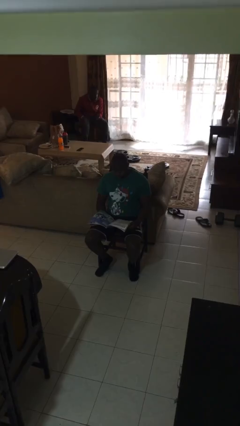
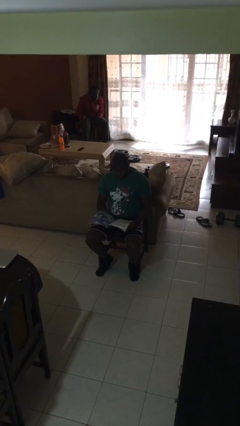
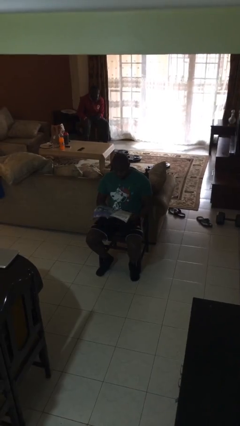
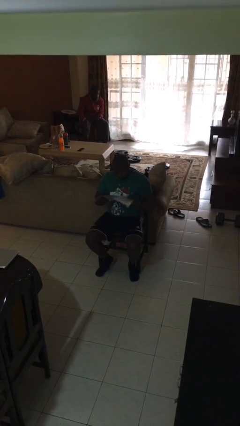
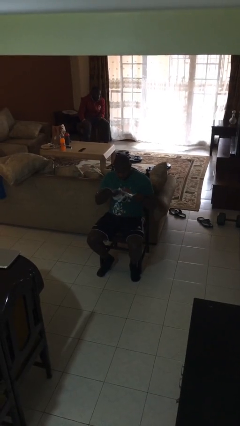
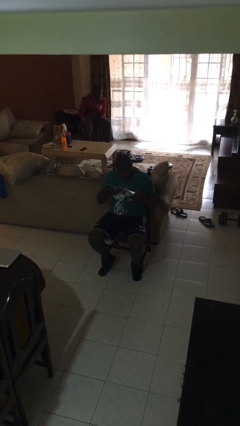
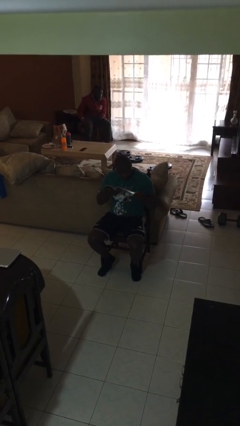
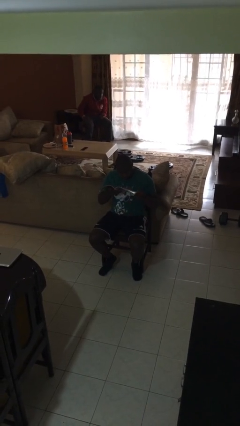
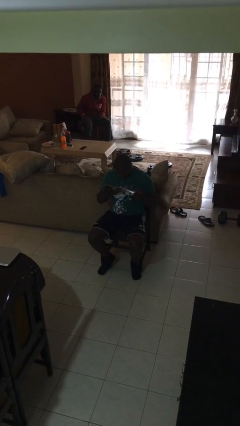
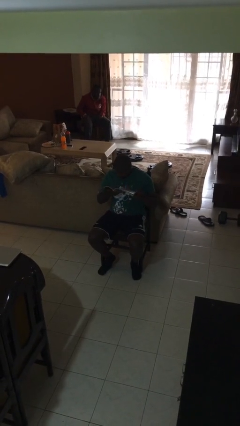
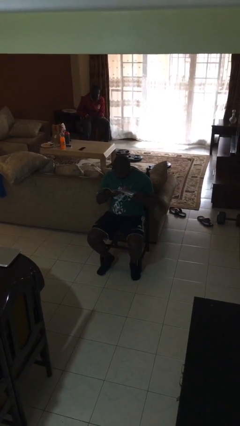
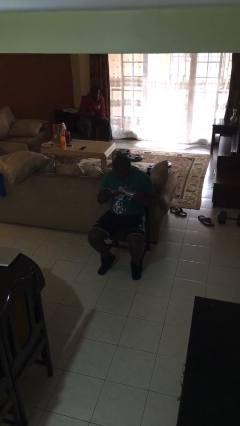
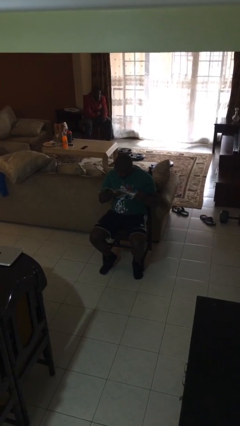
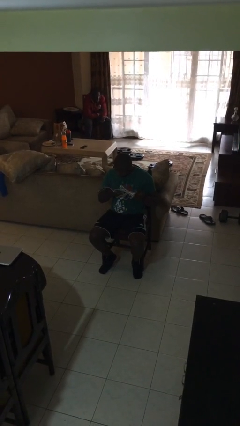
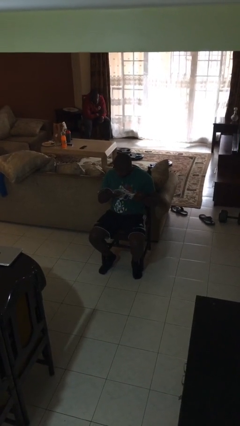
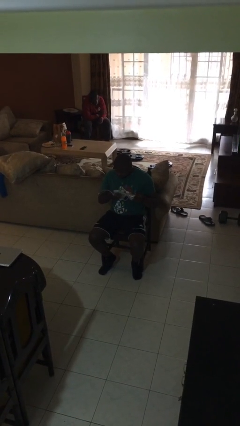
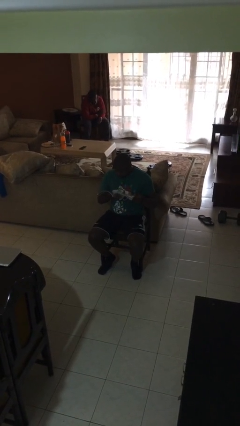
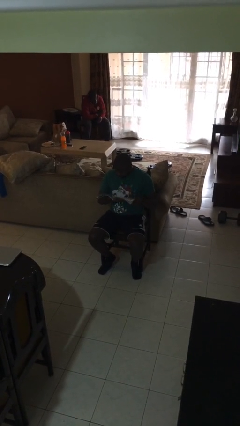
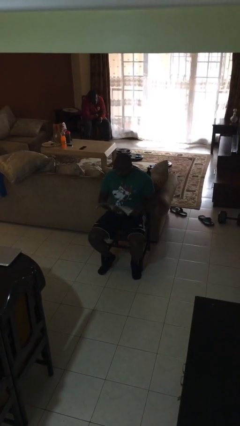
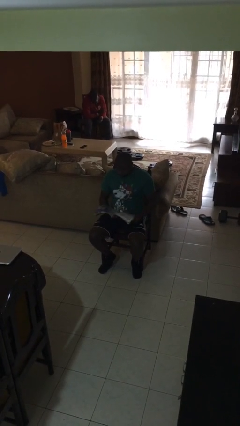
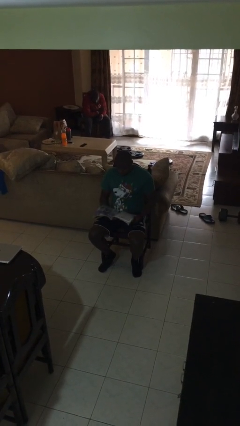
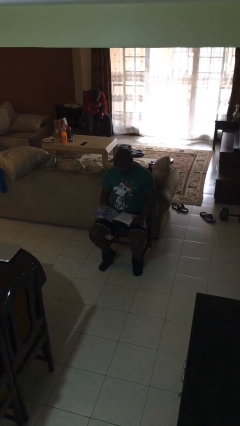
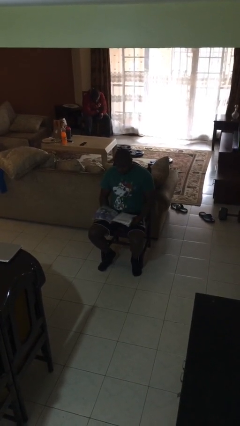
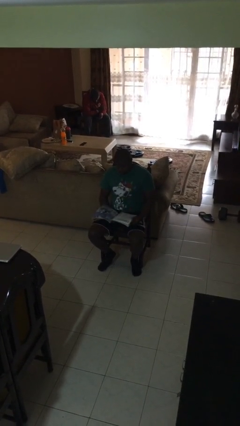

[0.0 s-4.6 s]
person reads document

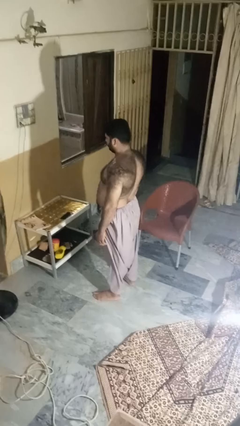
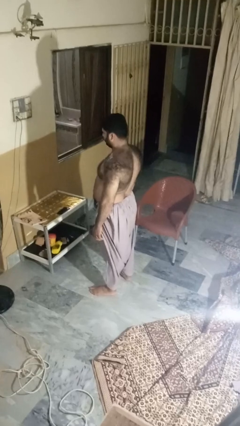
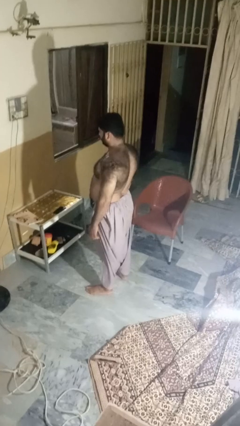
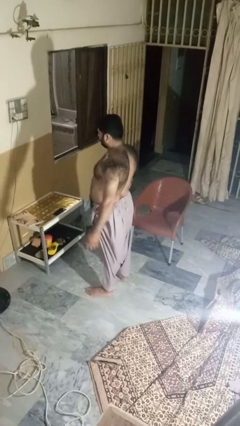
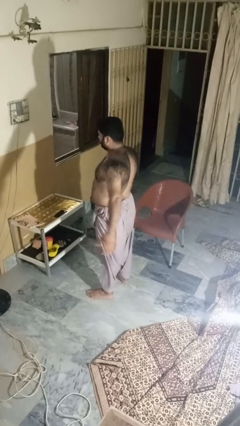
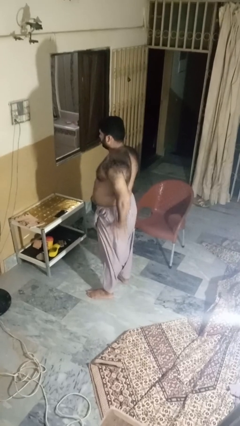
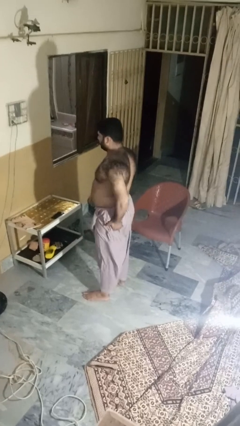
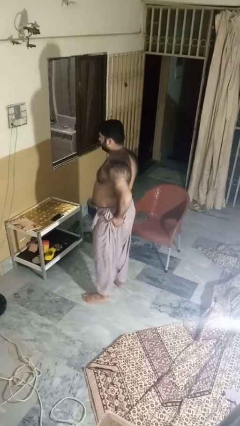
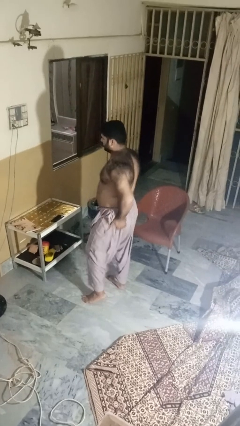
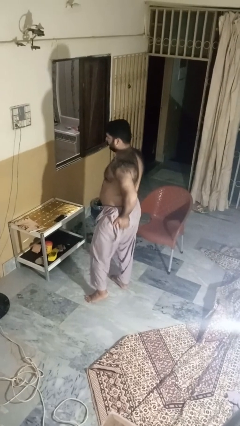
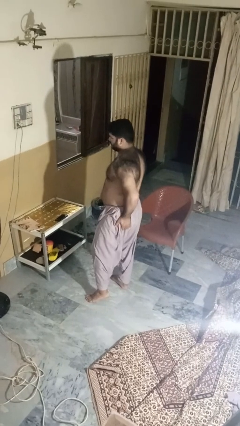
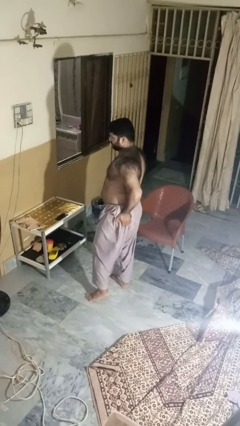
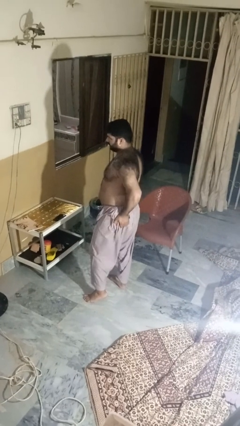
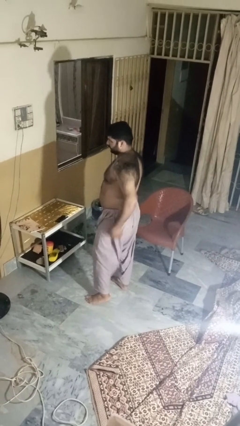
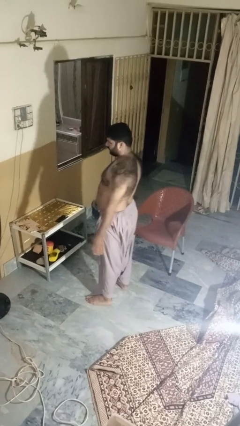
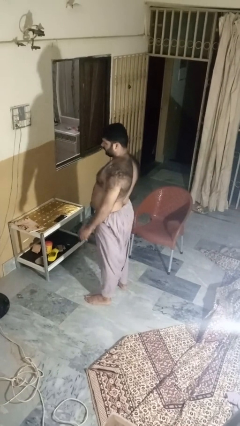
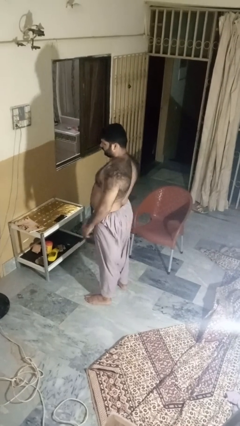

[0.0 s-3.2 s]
person wiggles hips

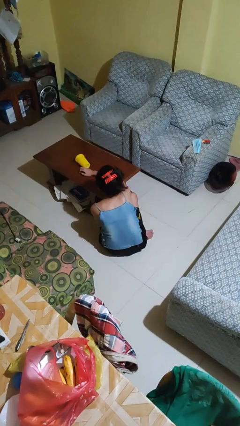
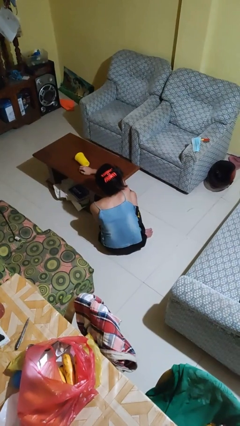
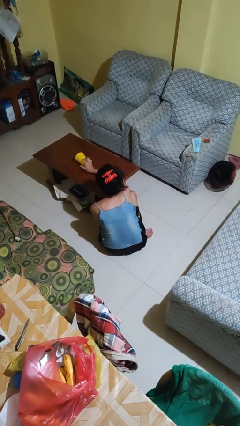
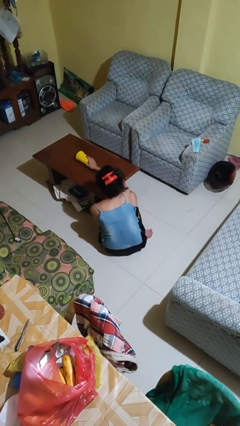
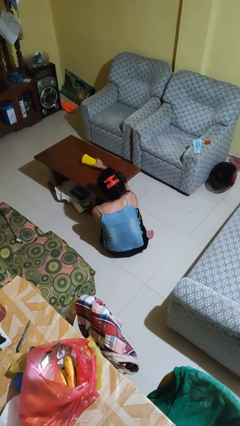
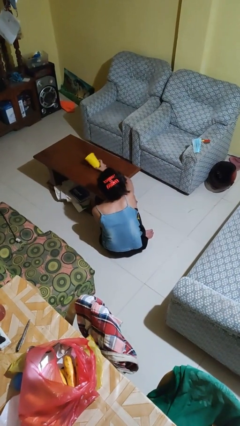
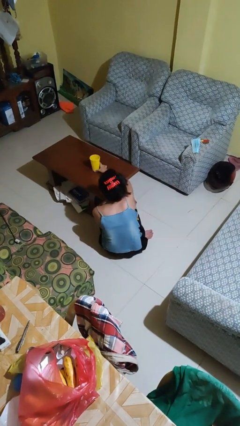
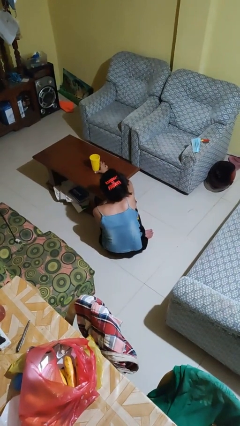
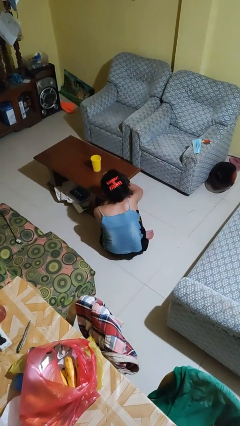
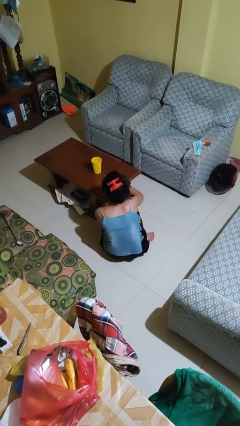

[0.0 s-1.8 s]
person sets upright glass

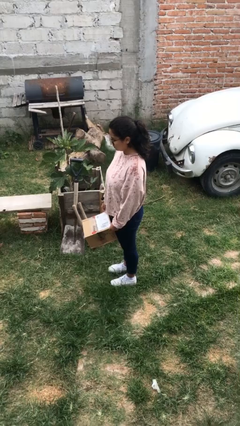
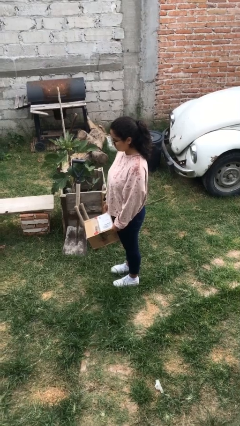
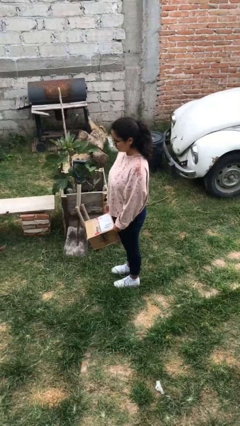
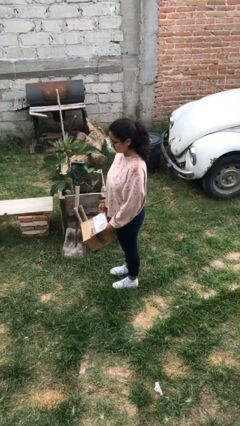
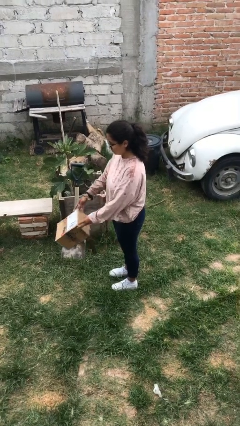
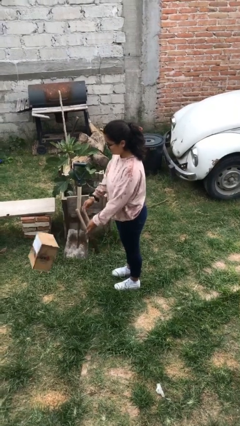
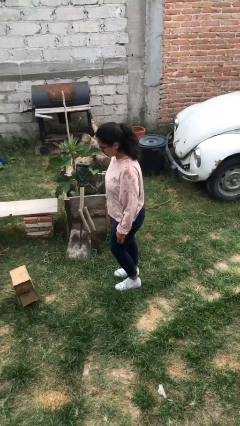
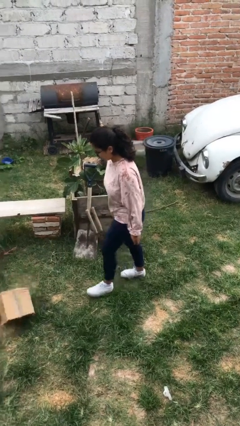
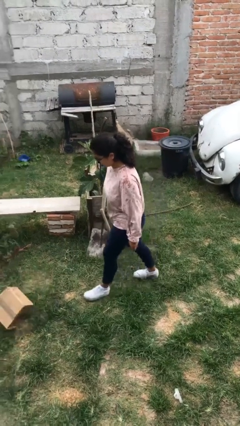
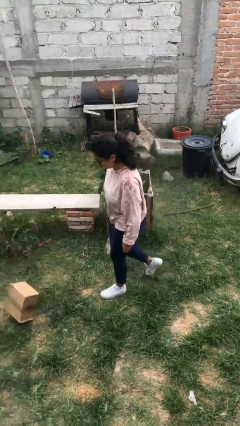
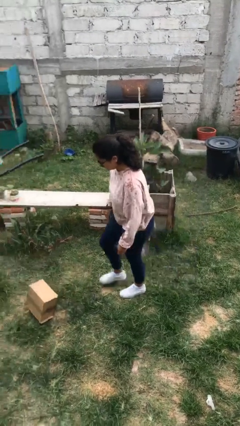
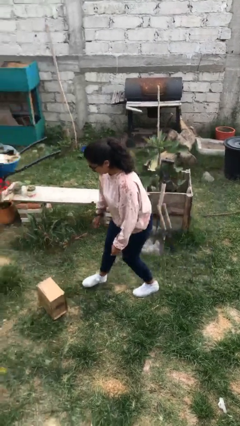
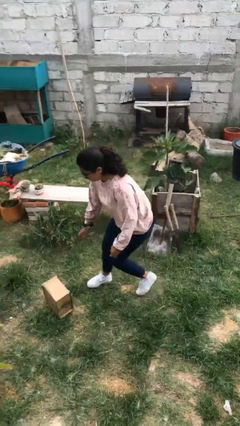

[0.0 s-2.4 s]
person throws object to ground

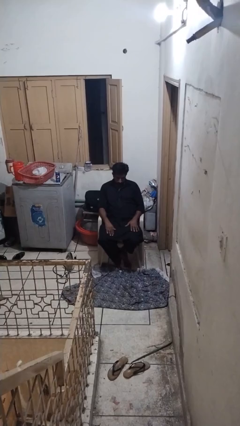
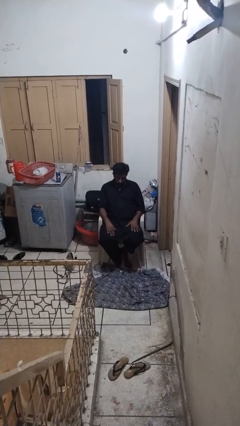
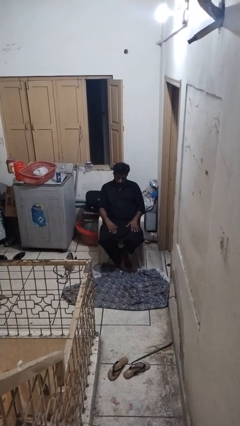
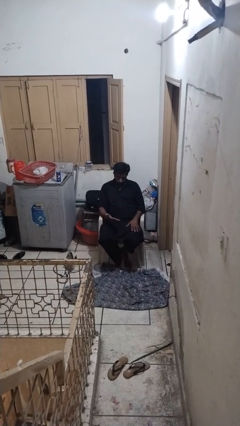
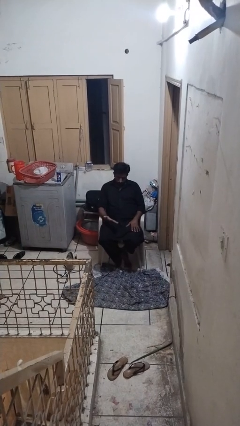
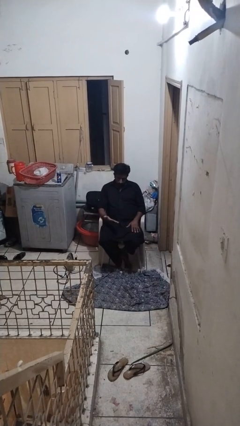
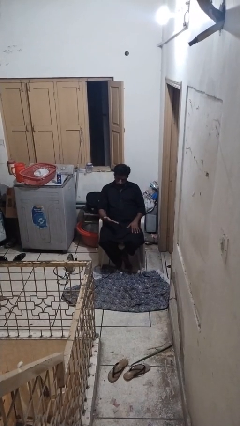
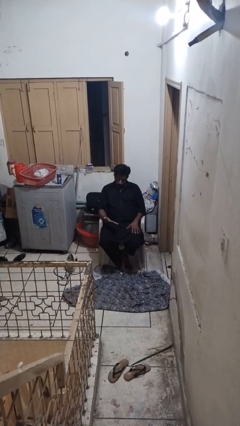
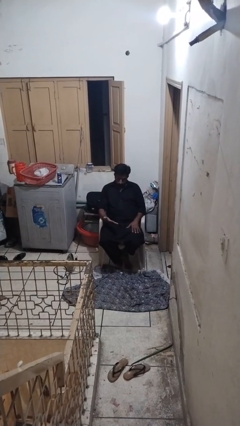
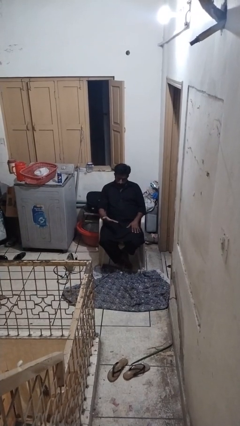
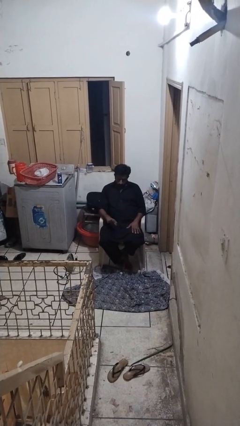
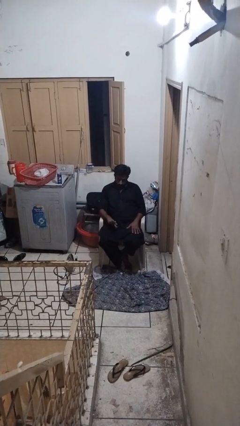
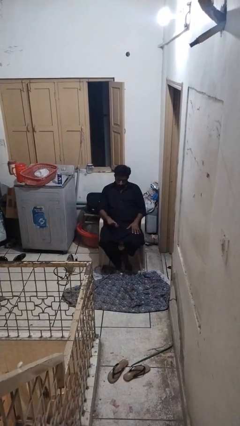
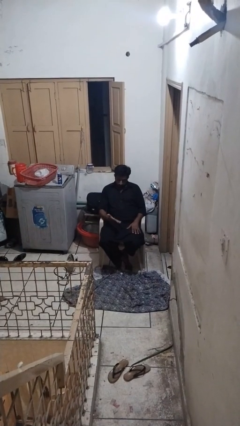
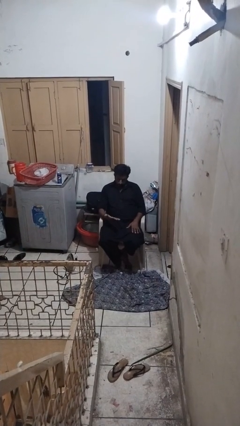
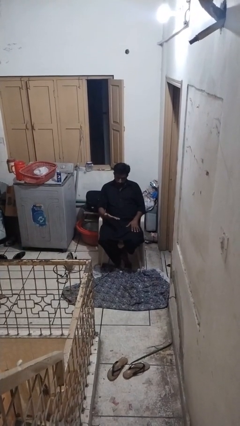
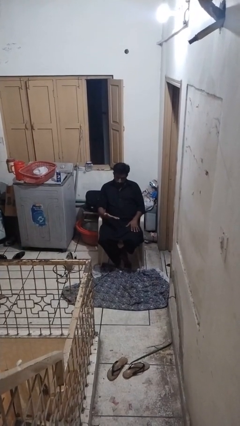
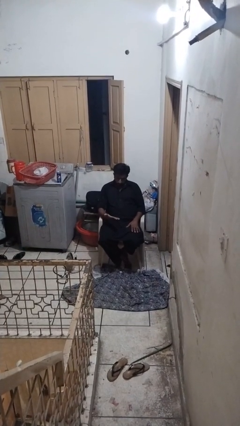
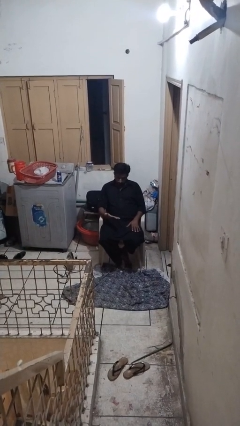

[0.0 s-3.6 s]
person looks at hands in lap

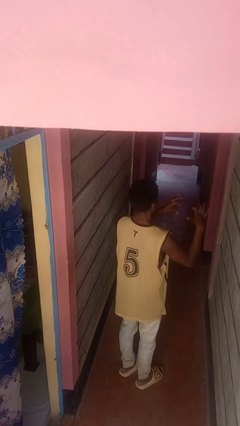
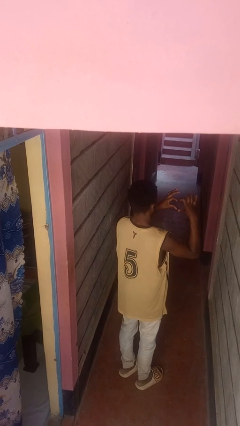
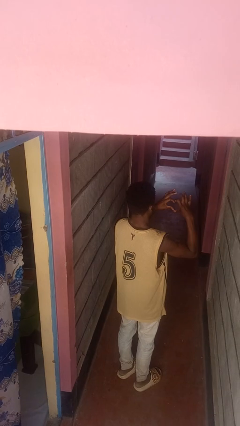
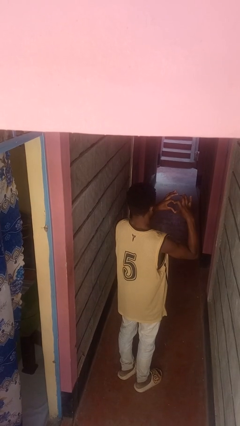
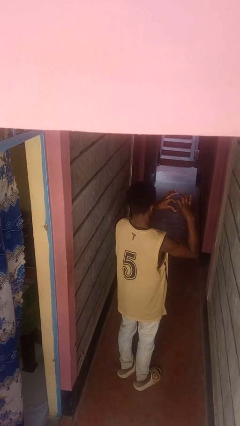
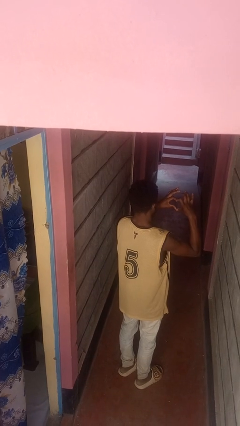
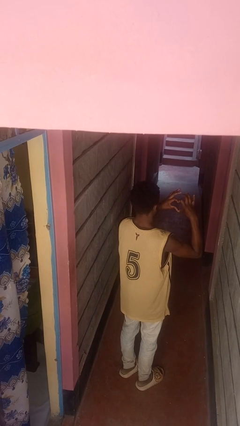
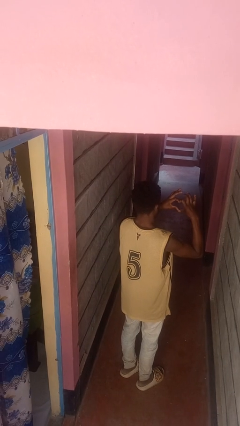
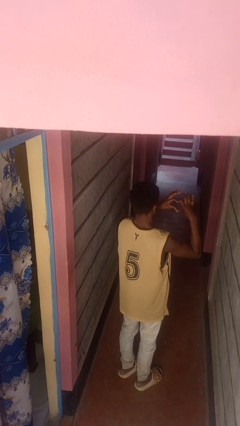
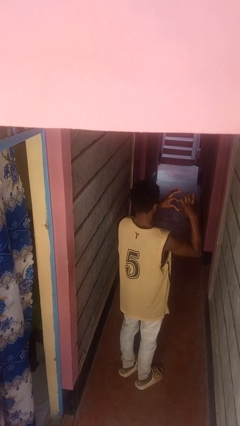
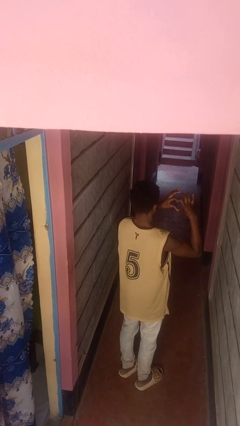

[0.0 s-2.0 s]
person gestures heart
